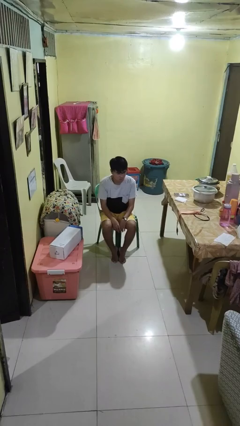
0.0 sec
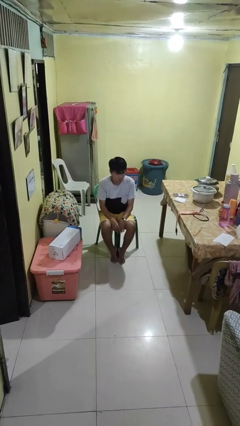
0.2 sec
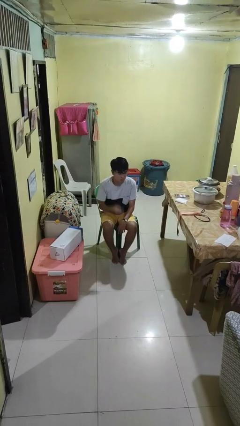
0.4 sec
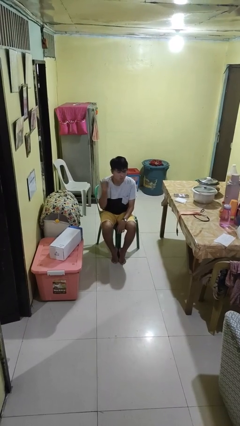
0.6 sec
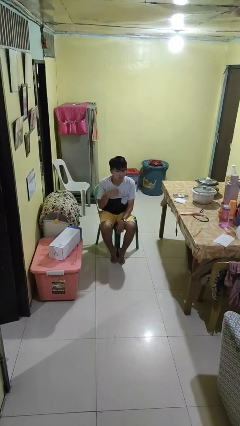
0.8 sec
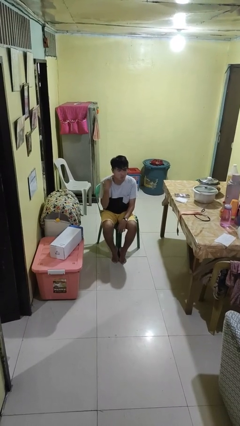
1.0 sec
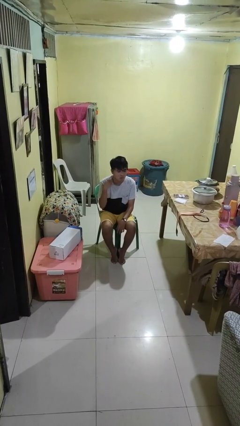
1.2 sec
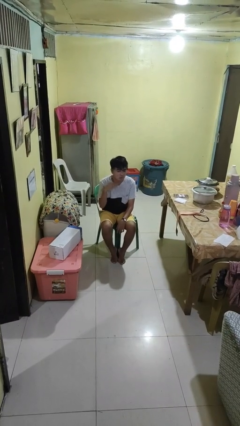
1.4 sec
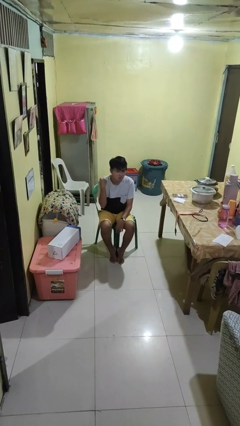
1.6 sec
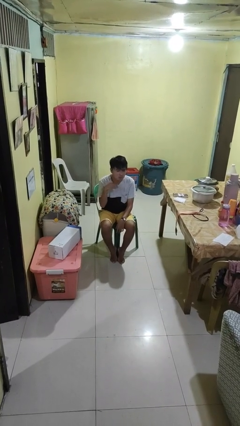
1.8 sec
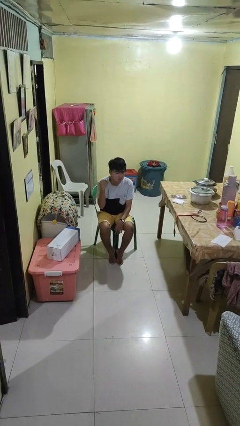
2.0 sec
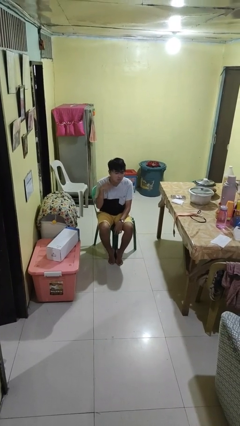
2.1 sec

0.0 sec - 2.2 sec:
person gestures cut

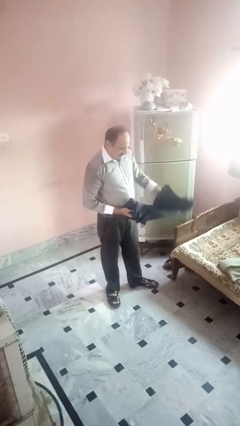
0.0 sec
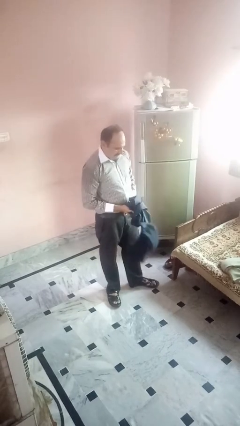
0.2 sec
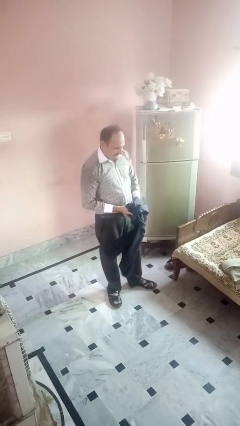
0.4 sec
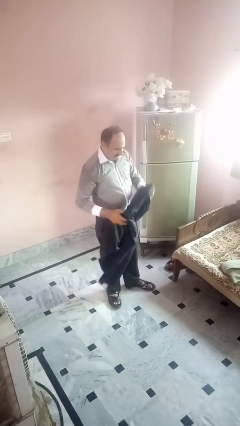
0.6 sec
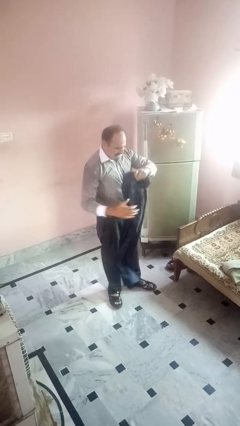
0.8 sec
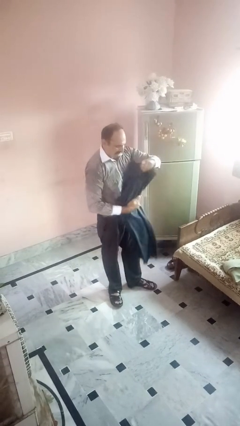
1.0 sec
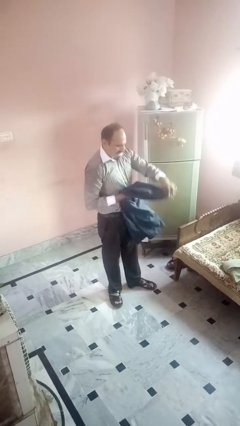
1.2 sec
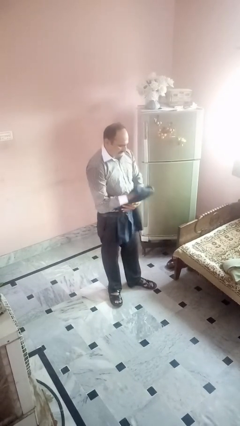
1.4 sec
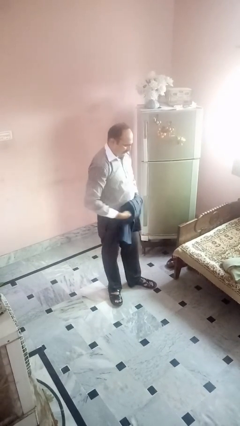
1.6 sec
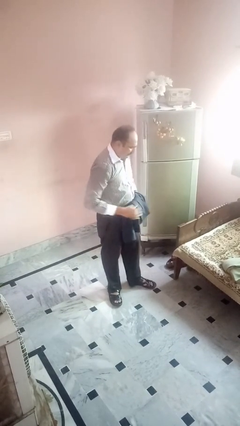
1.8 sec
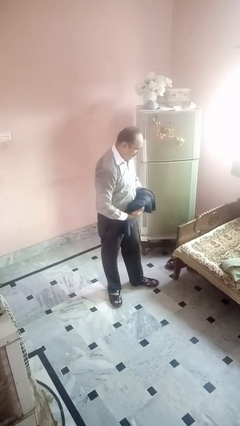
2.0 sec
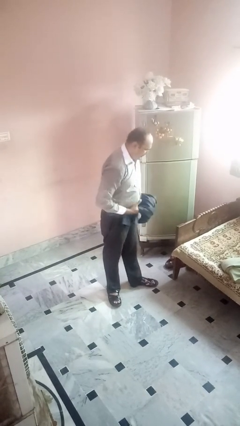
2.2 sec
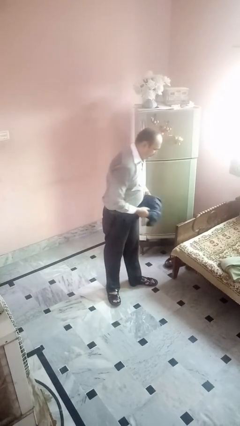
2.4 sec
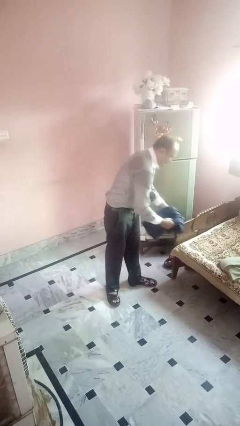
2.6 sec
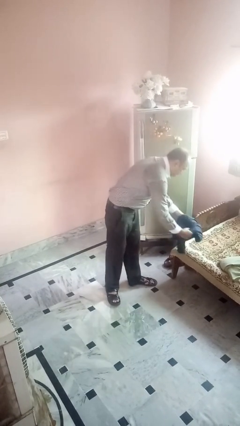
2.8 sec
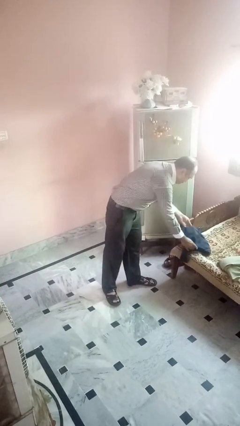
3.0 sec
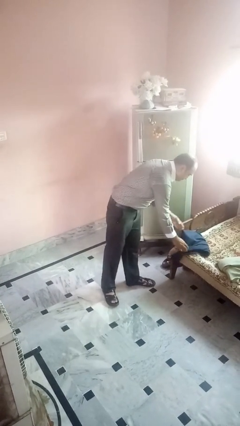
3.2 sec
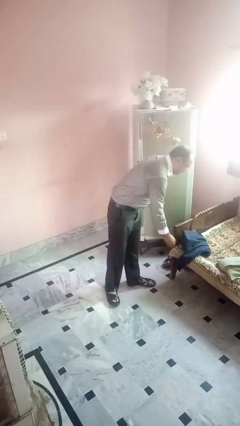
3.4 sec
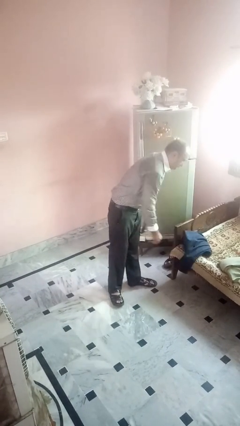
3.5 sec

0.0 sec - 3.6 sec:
person folds pants

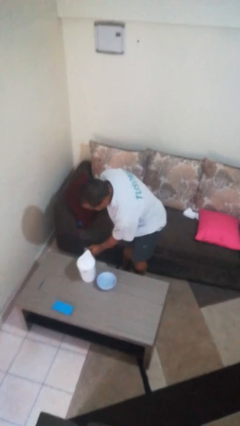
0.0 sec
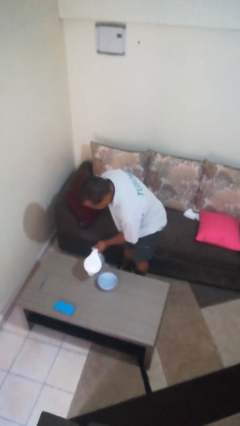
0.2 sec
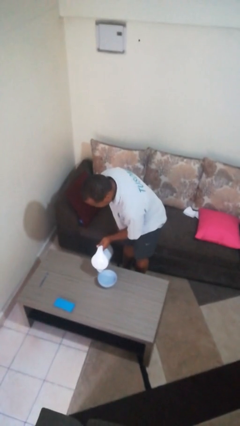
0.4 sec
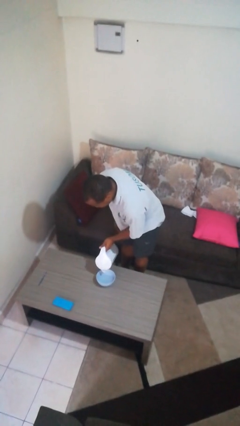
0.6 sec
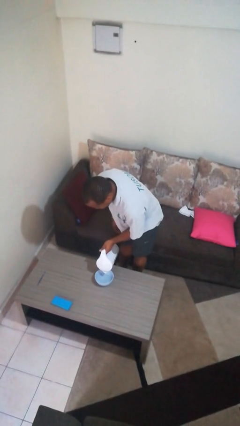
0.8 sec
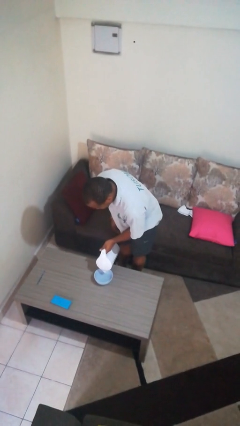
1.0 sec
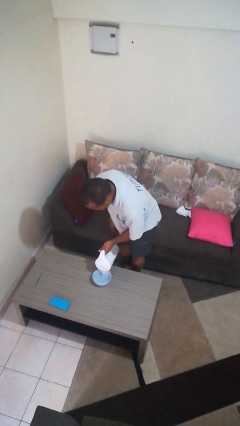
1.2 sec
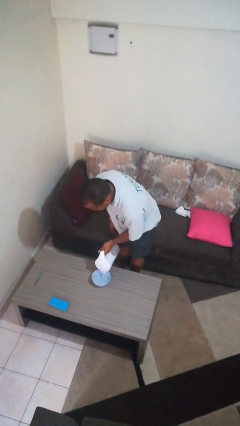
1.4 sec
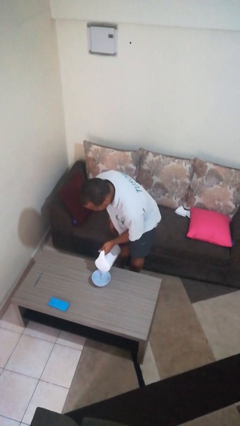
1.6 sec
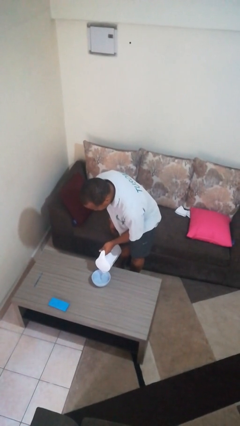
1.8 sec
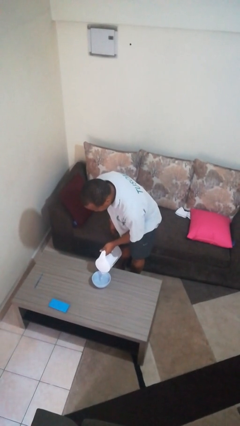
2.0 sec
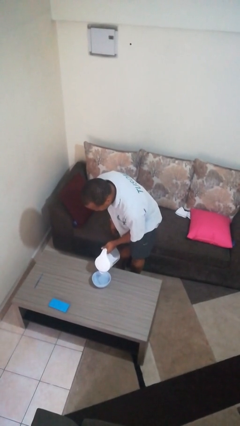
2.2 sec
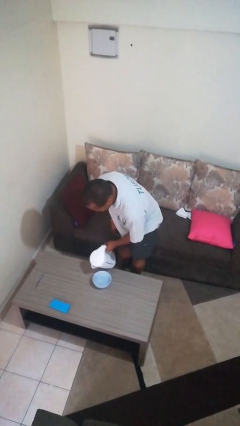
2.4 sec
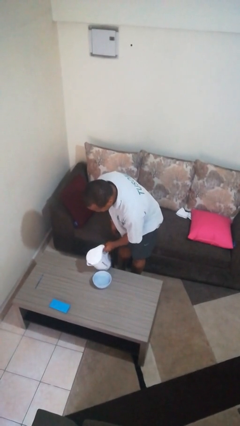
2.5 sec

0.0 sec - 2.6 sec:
person pours into bowl

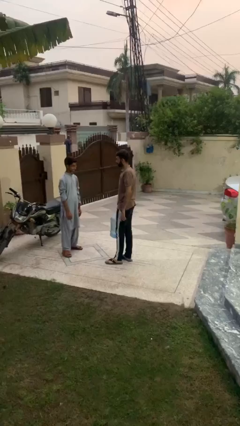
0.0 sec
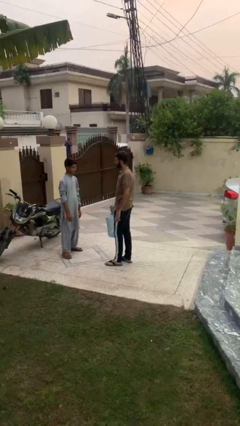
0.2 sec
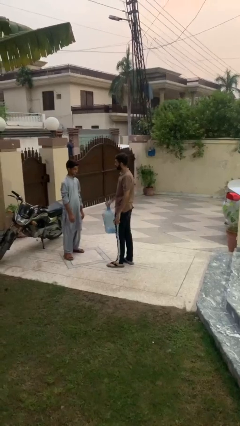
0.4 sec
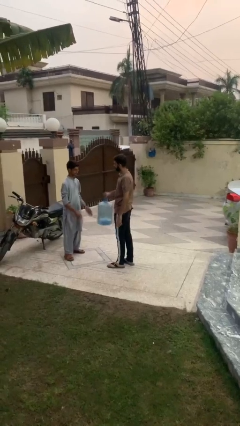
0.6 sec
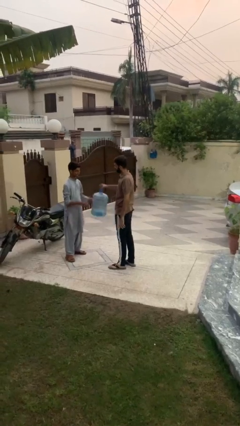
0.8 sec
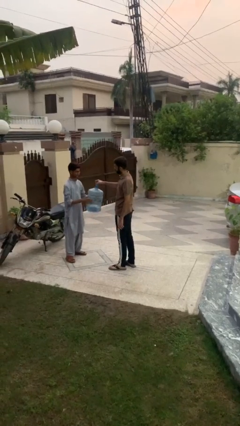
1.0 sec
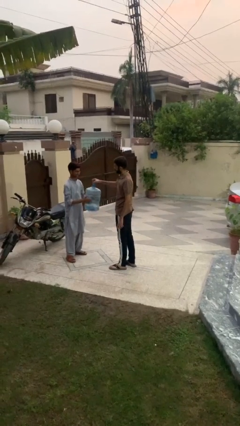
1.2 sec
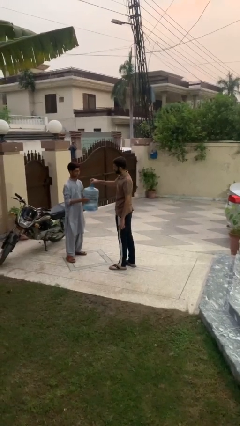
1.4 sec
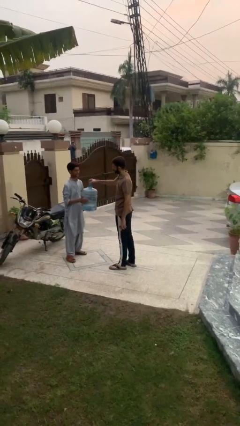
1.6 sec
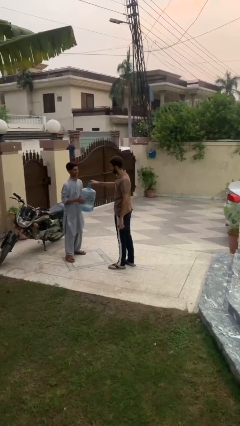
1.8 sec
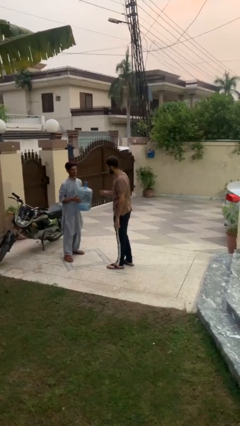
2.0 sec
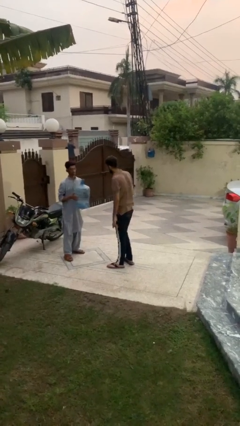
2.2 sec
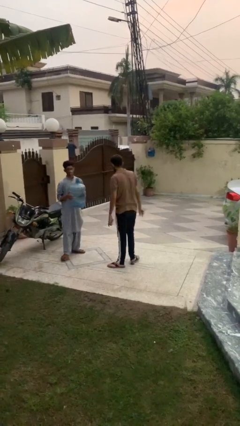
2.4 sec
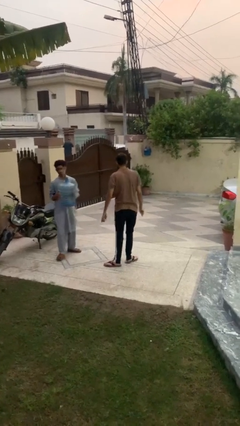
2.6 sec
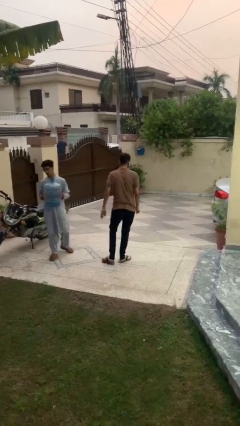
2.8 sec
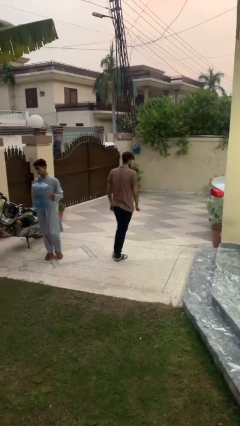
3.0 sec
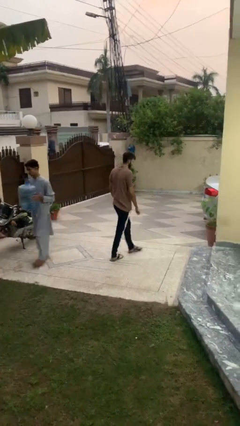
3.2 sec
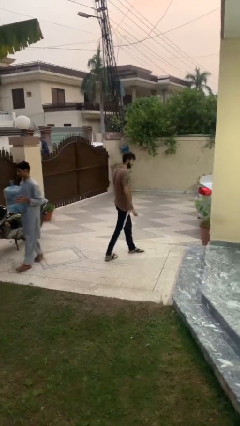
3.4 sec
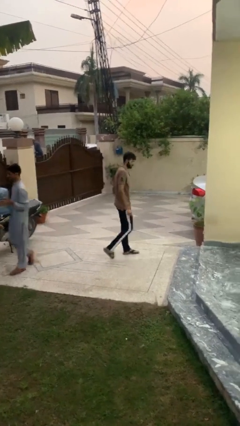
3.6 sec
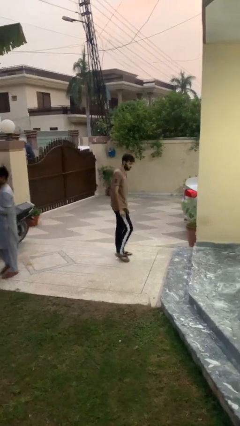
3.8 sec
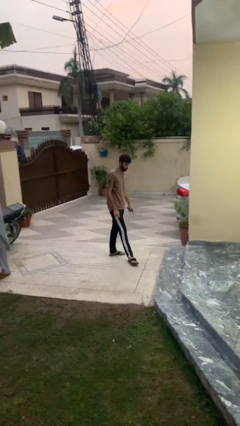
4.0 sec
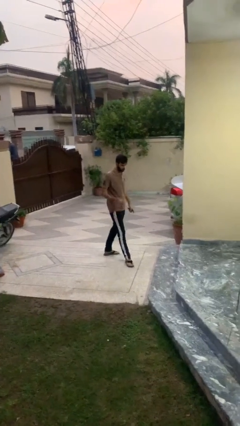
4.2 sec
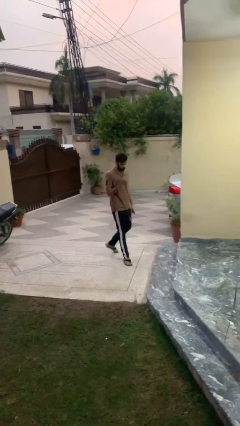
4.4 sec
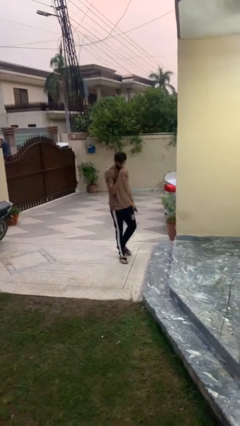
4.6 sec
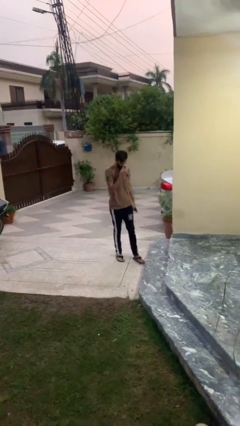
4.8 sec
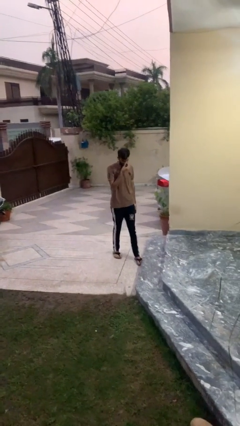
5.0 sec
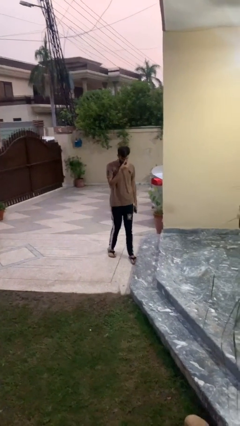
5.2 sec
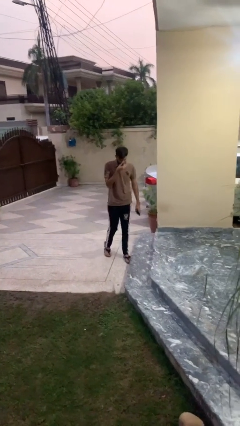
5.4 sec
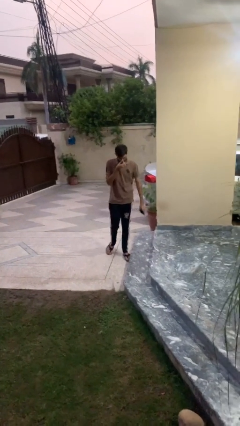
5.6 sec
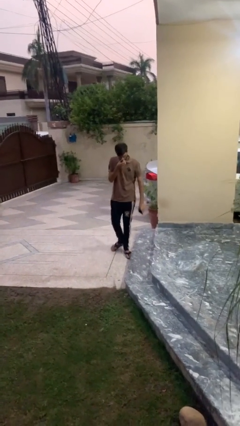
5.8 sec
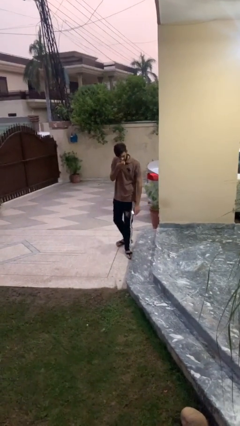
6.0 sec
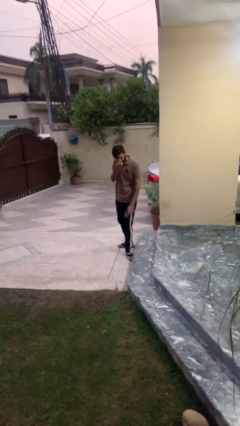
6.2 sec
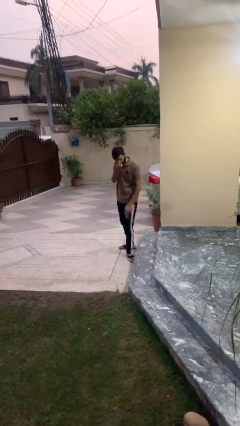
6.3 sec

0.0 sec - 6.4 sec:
person transfers object to person

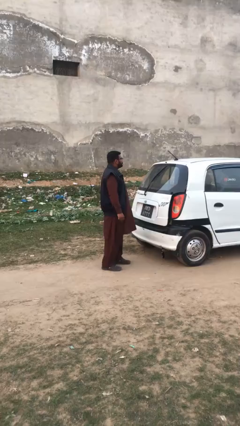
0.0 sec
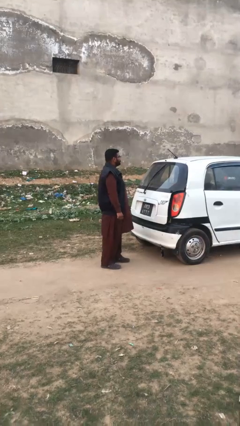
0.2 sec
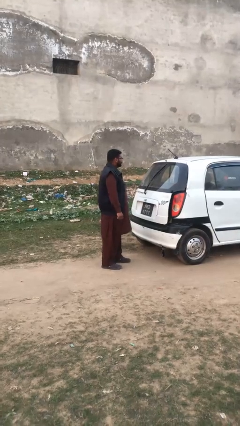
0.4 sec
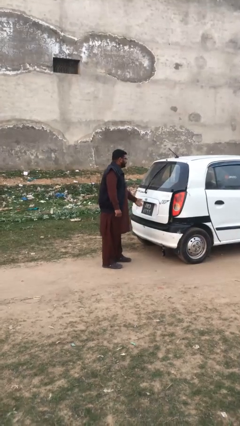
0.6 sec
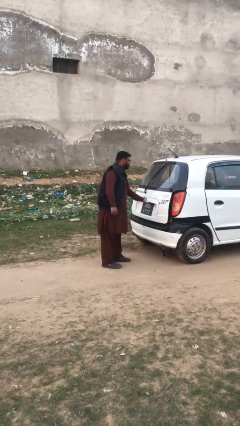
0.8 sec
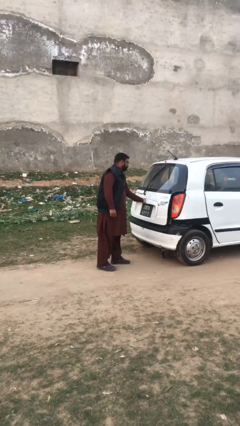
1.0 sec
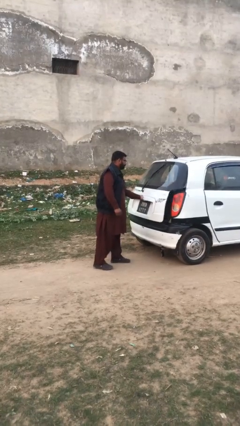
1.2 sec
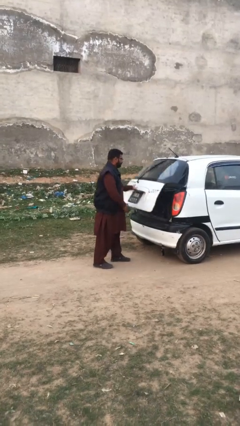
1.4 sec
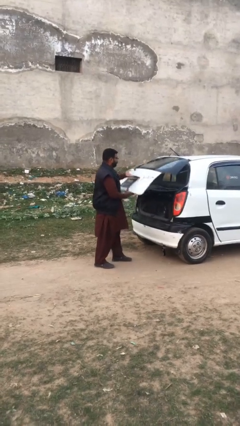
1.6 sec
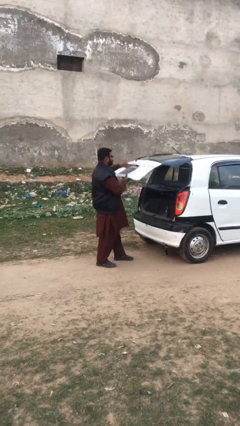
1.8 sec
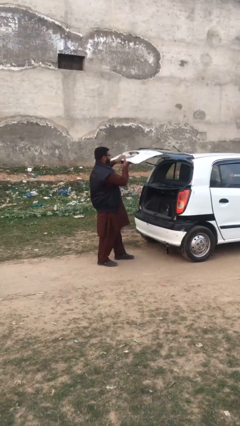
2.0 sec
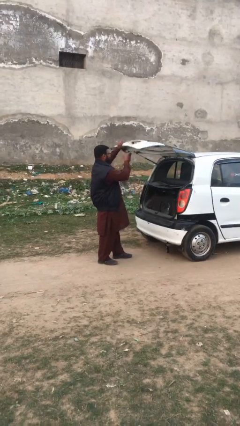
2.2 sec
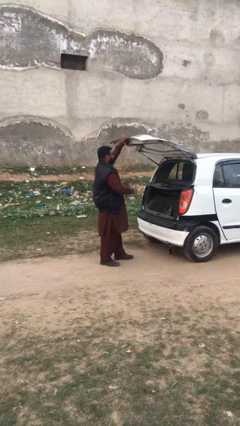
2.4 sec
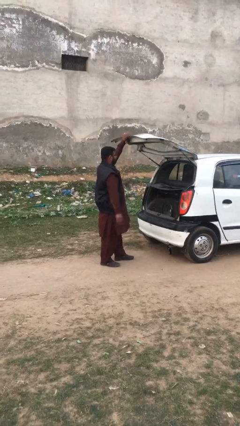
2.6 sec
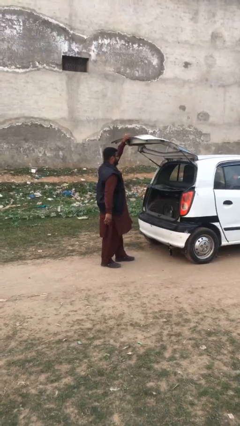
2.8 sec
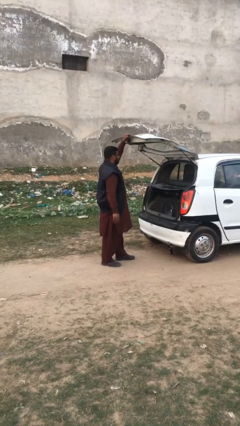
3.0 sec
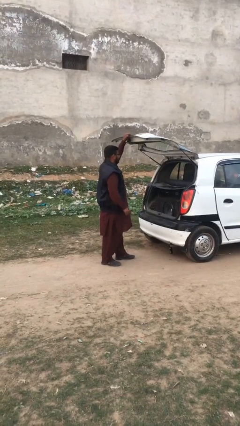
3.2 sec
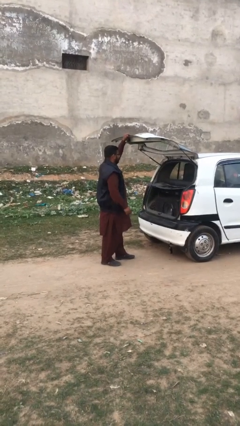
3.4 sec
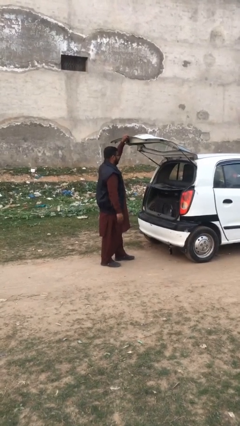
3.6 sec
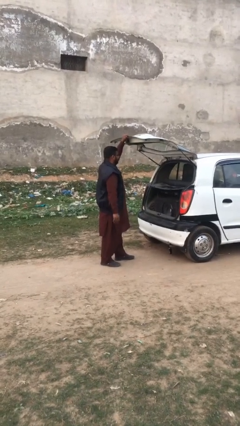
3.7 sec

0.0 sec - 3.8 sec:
person opens car trunk
